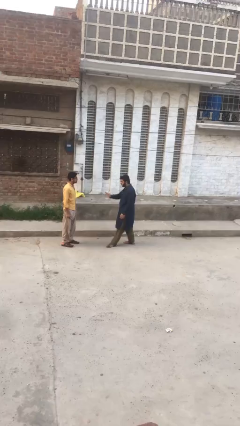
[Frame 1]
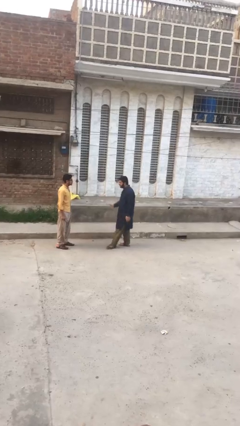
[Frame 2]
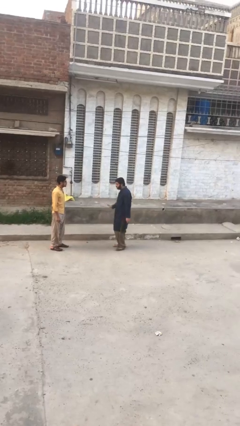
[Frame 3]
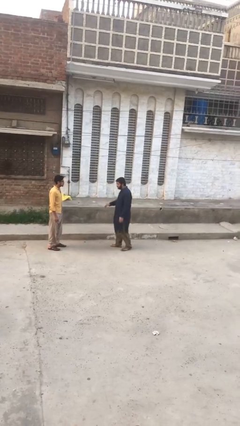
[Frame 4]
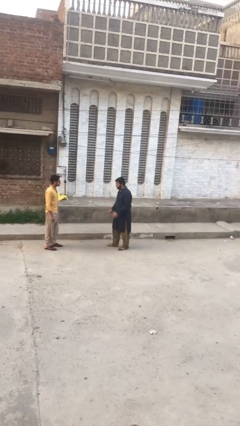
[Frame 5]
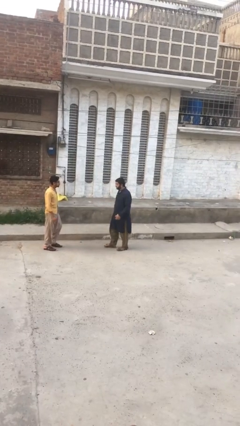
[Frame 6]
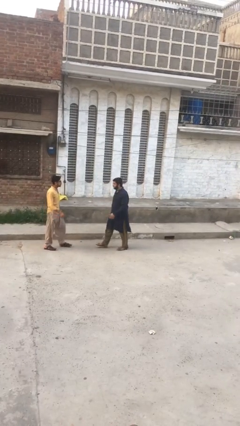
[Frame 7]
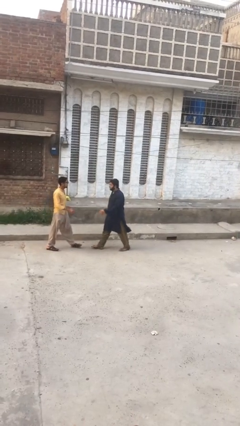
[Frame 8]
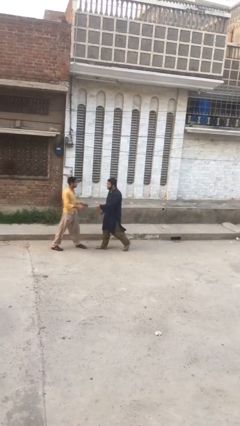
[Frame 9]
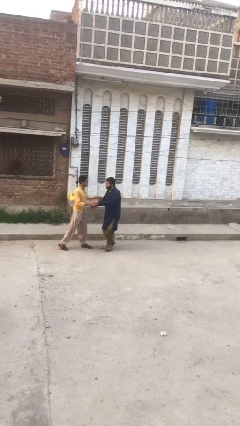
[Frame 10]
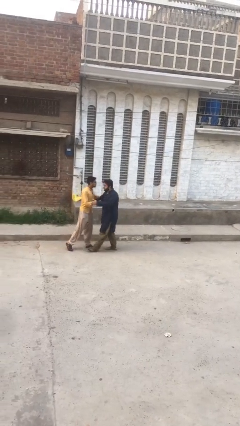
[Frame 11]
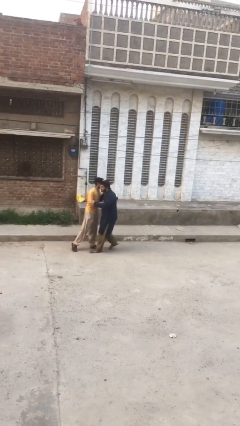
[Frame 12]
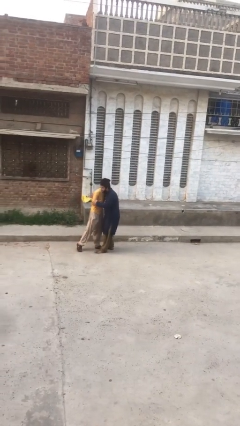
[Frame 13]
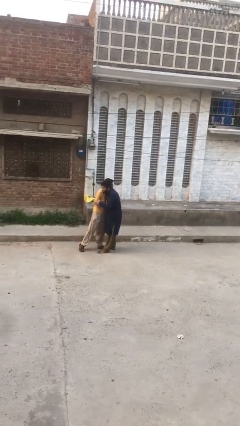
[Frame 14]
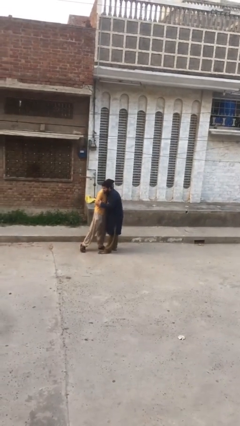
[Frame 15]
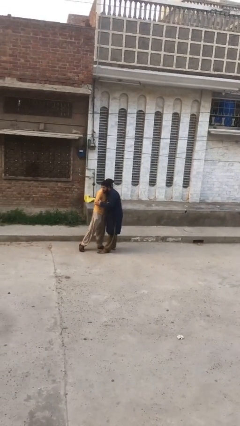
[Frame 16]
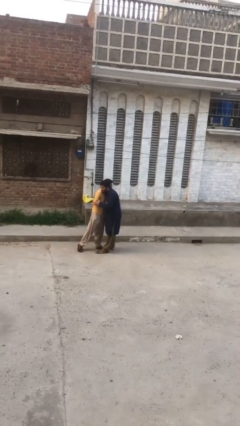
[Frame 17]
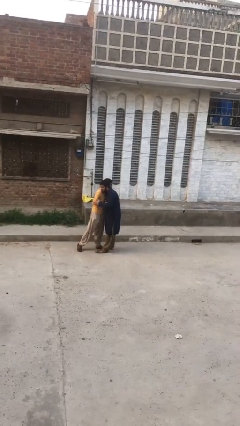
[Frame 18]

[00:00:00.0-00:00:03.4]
person embraces person

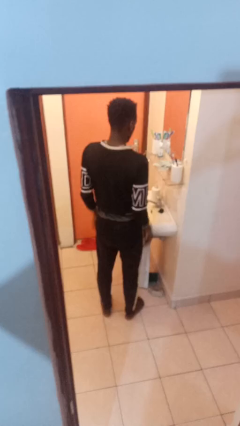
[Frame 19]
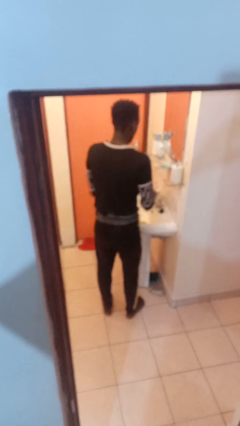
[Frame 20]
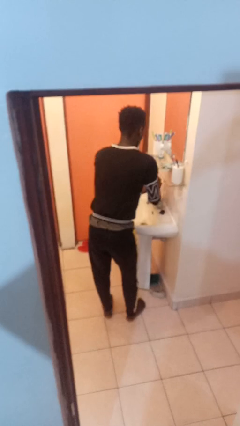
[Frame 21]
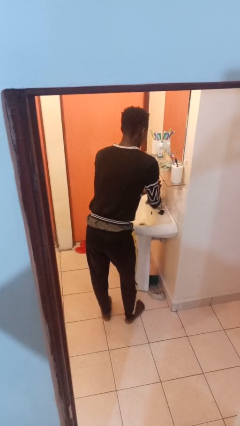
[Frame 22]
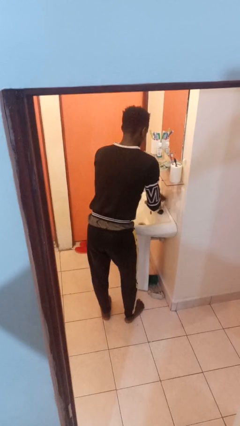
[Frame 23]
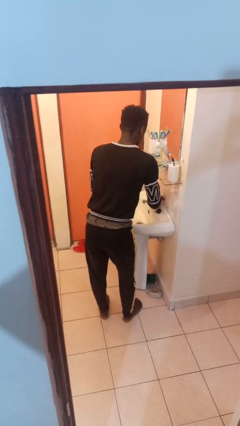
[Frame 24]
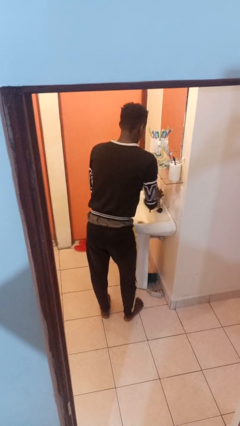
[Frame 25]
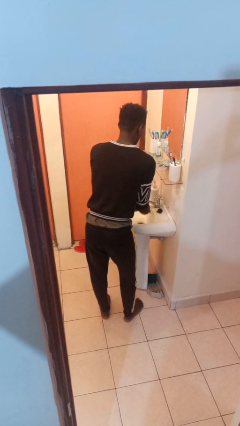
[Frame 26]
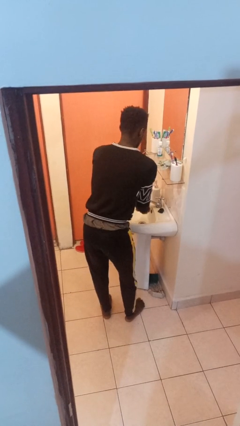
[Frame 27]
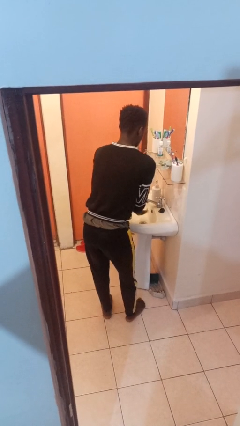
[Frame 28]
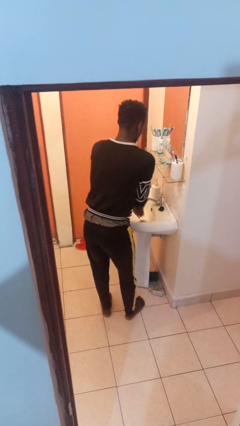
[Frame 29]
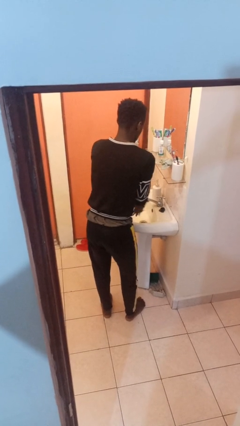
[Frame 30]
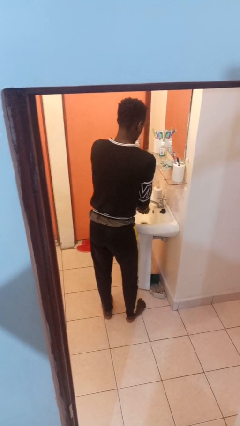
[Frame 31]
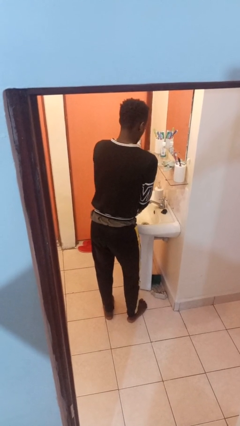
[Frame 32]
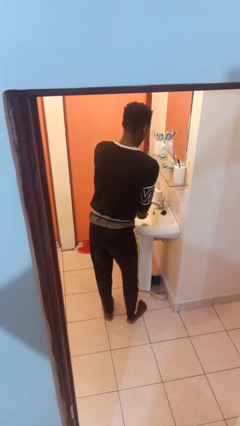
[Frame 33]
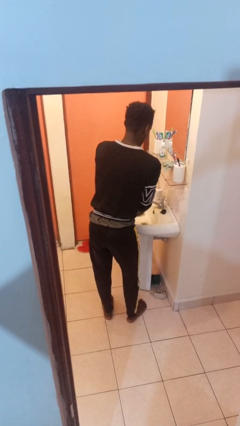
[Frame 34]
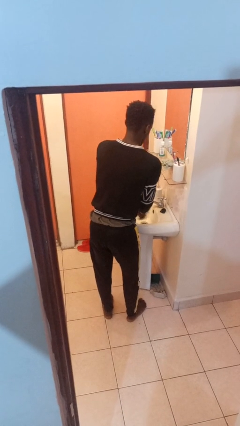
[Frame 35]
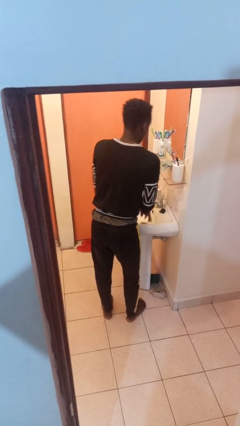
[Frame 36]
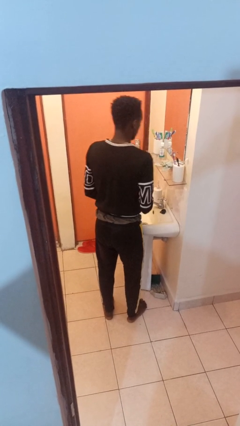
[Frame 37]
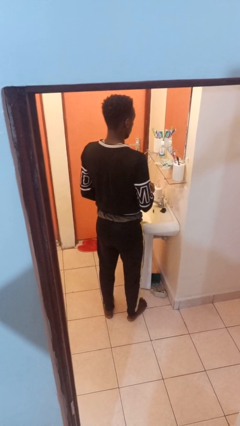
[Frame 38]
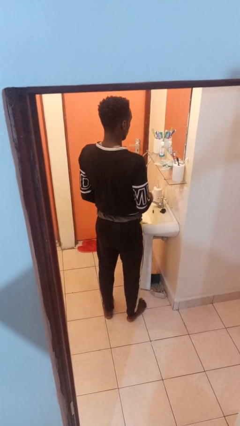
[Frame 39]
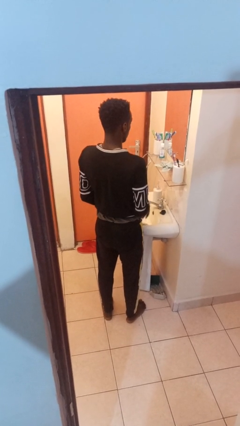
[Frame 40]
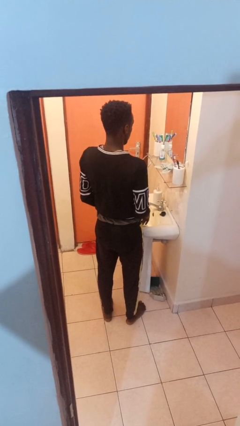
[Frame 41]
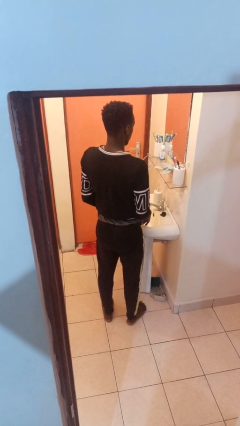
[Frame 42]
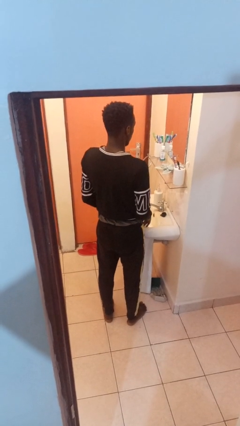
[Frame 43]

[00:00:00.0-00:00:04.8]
person washes hands

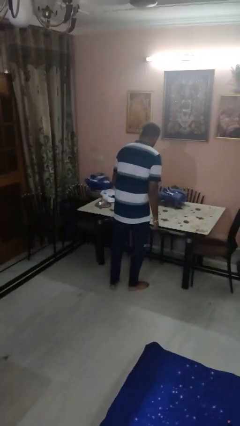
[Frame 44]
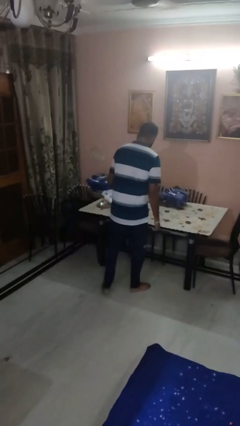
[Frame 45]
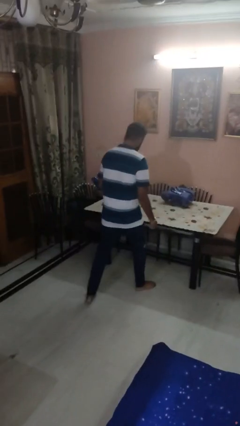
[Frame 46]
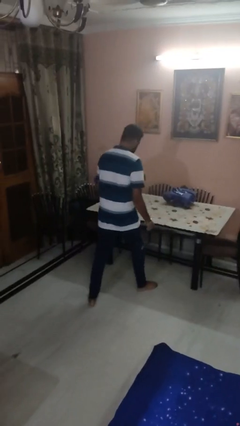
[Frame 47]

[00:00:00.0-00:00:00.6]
person picks up object from table

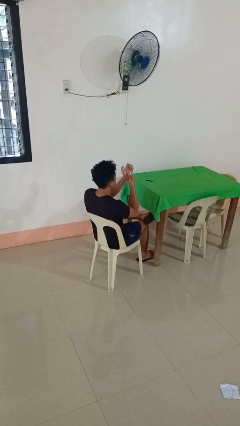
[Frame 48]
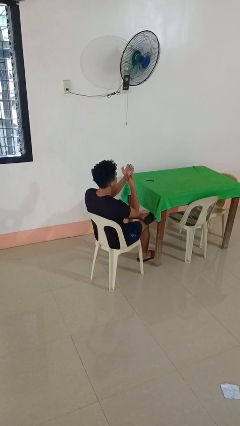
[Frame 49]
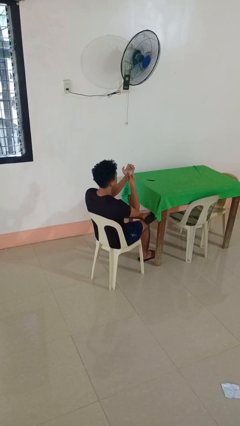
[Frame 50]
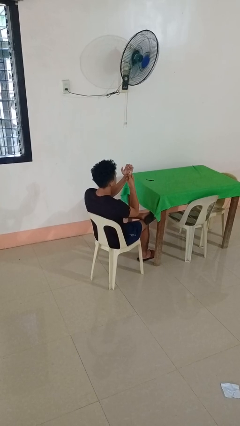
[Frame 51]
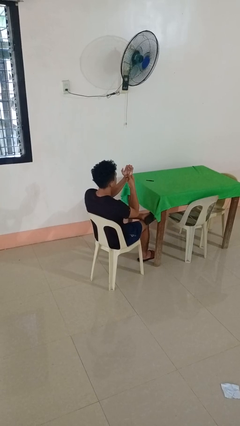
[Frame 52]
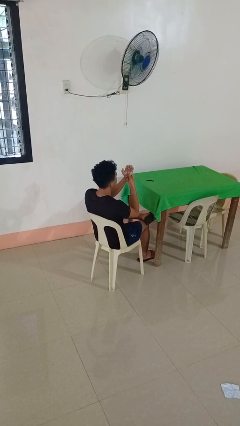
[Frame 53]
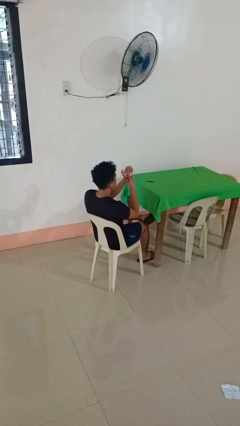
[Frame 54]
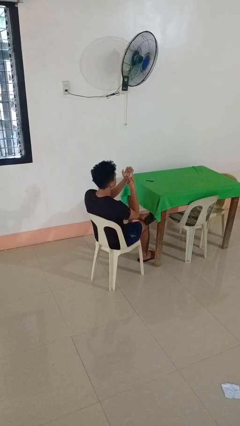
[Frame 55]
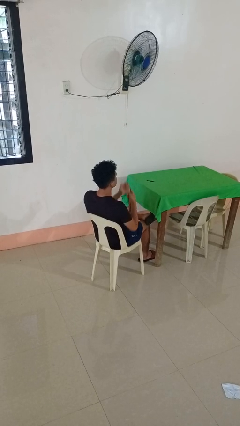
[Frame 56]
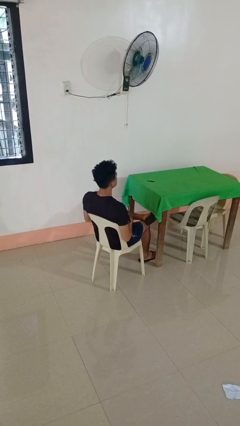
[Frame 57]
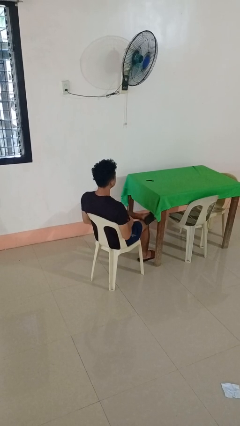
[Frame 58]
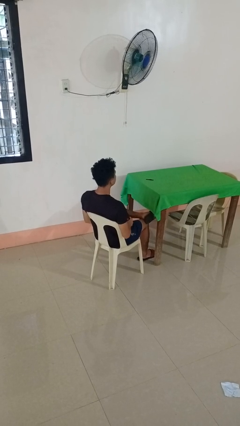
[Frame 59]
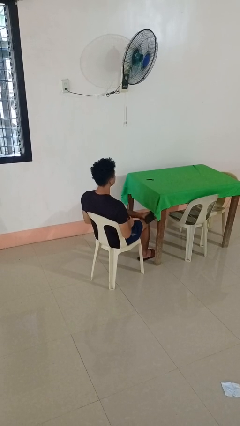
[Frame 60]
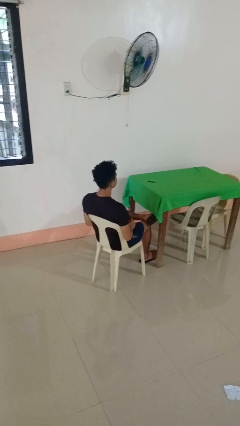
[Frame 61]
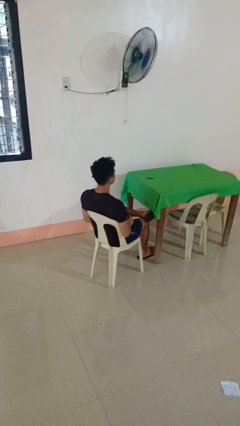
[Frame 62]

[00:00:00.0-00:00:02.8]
person clips fingernails

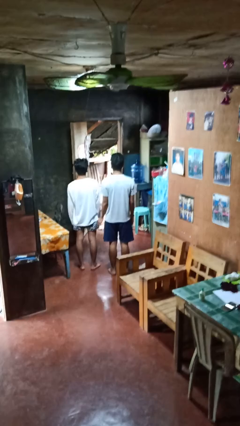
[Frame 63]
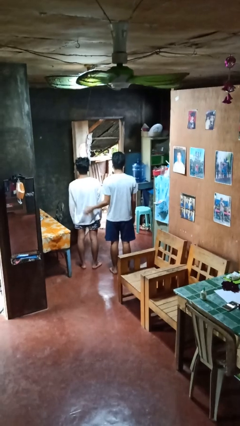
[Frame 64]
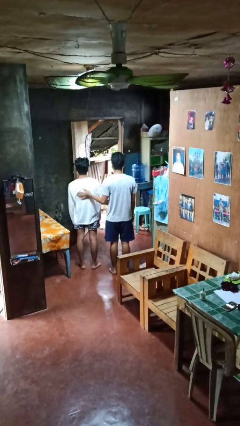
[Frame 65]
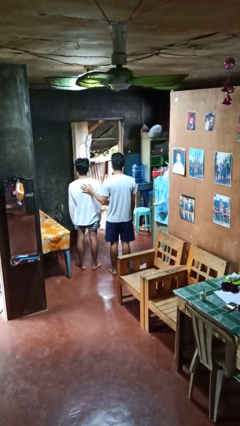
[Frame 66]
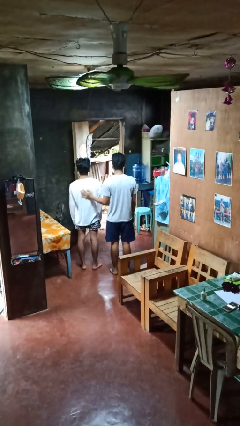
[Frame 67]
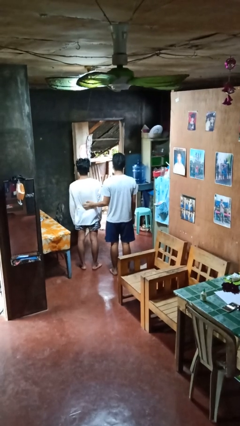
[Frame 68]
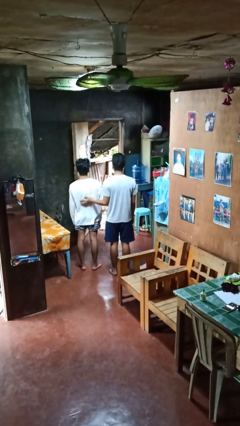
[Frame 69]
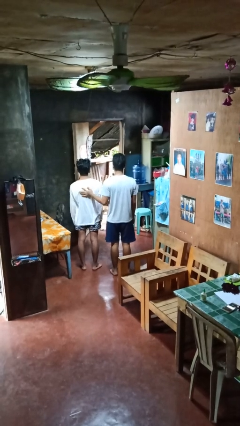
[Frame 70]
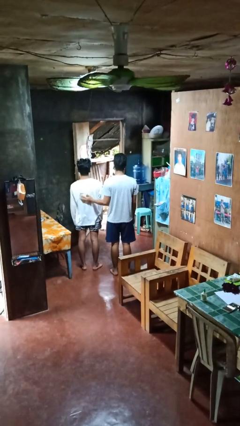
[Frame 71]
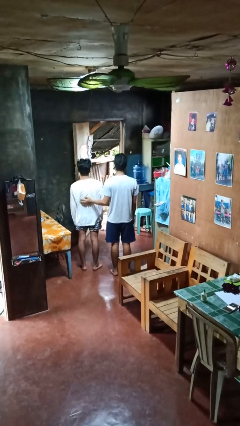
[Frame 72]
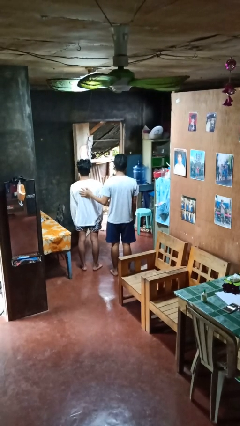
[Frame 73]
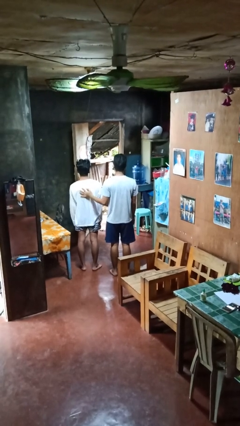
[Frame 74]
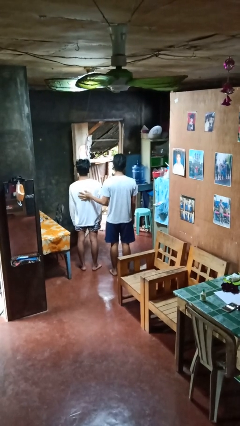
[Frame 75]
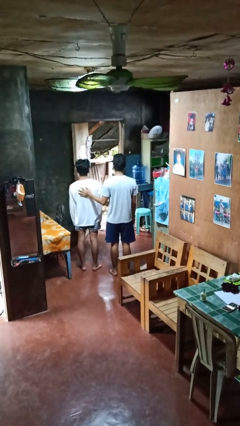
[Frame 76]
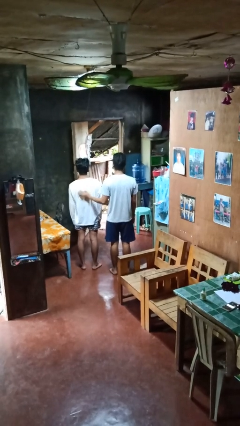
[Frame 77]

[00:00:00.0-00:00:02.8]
person touches back of person

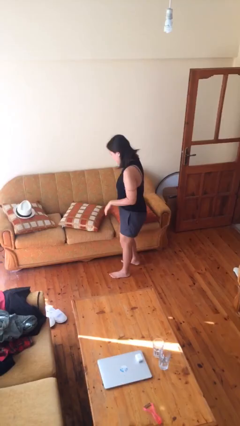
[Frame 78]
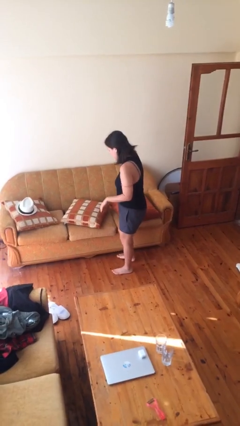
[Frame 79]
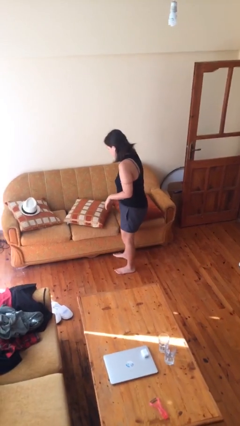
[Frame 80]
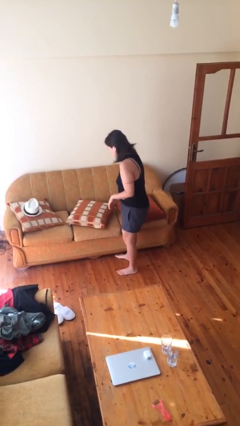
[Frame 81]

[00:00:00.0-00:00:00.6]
person searches in couch

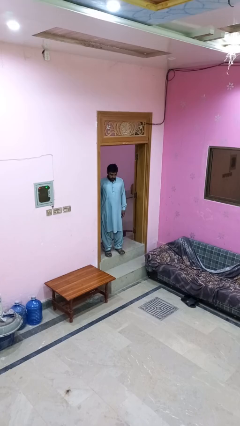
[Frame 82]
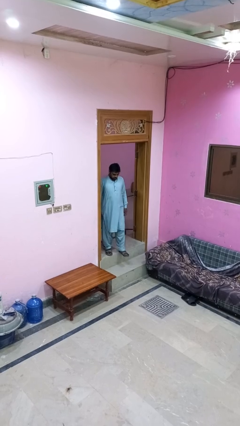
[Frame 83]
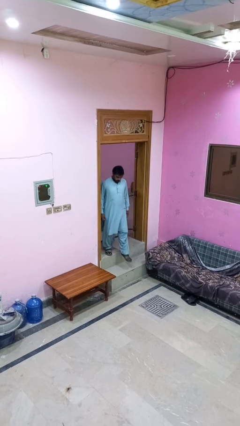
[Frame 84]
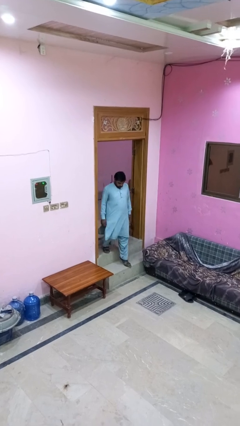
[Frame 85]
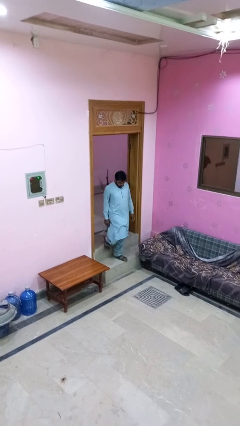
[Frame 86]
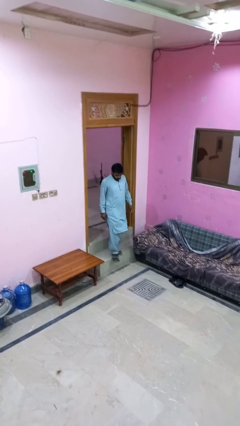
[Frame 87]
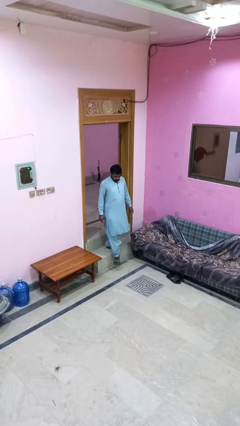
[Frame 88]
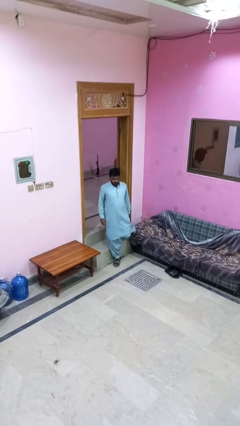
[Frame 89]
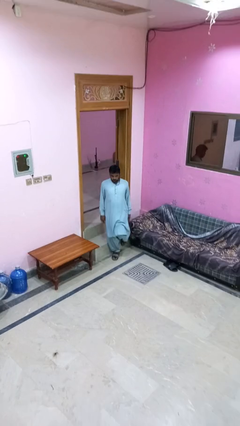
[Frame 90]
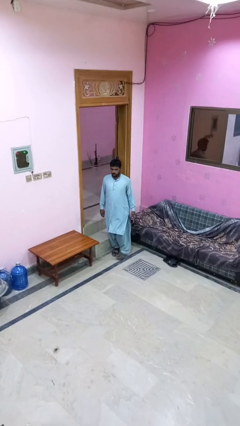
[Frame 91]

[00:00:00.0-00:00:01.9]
person climbs down stairs

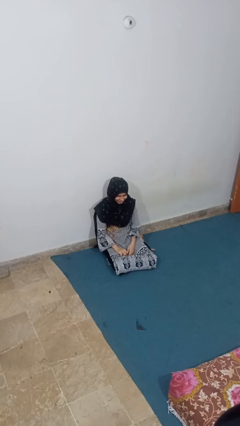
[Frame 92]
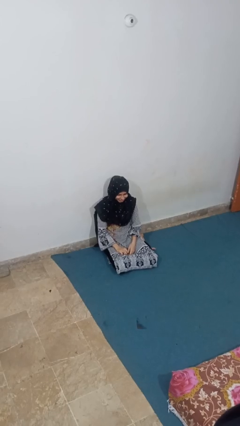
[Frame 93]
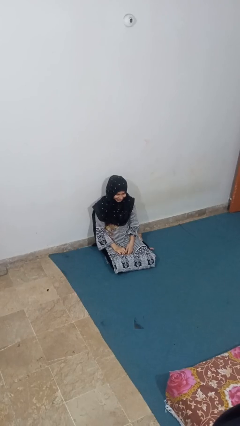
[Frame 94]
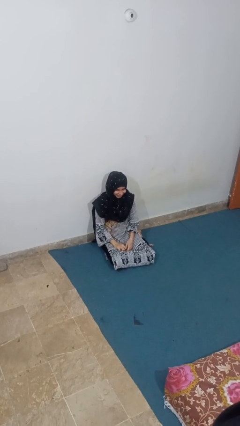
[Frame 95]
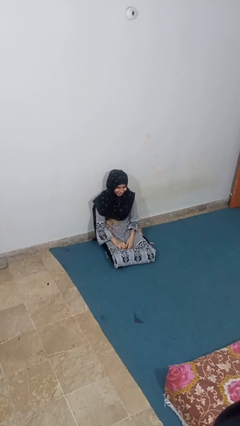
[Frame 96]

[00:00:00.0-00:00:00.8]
person yawns
